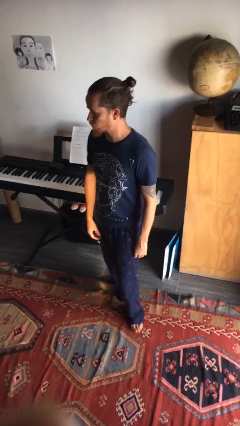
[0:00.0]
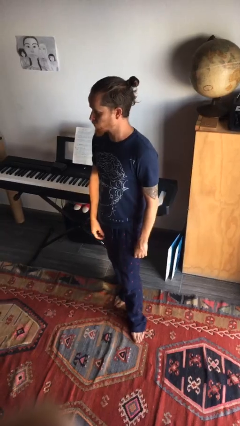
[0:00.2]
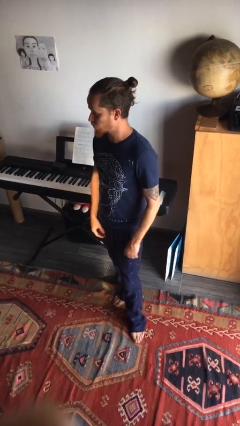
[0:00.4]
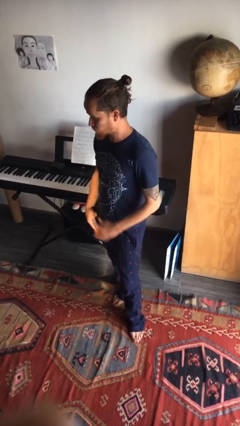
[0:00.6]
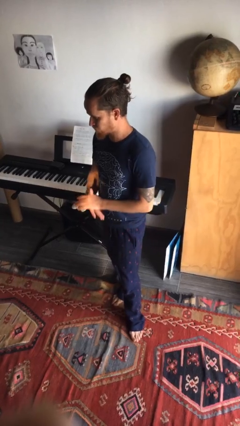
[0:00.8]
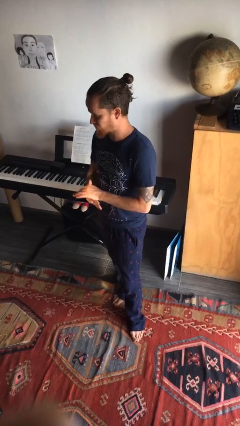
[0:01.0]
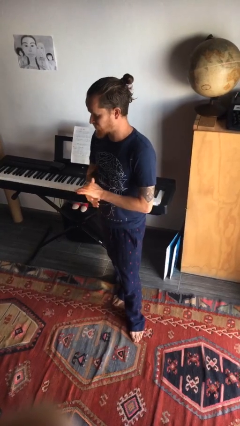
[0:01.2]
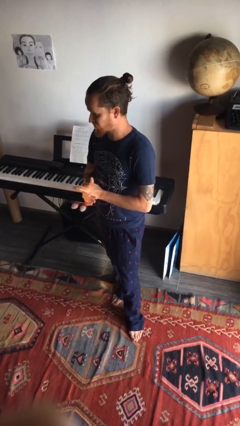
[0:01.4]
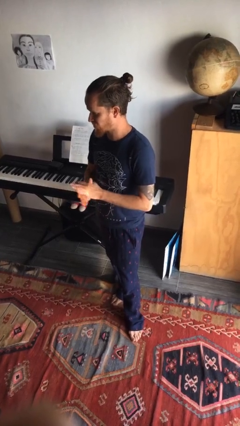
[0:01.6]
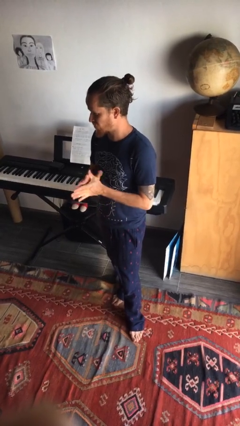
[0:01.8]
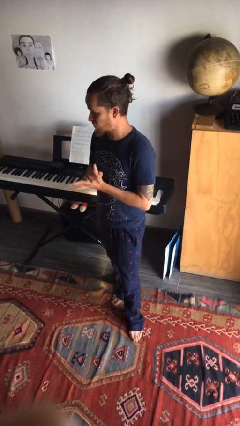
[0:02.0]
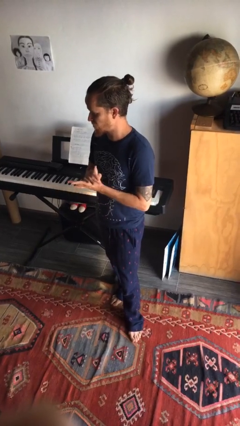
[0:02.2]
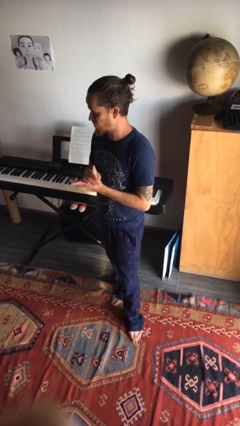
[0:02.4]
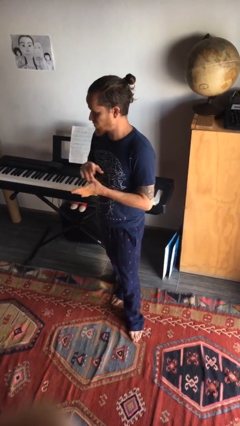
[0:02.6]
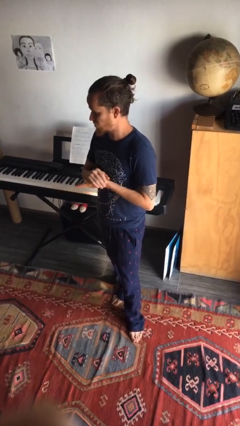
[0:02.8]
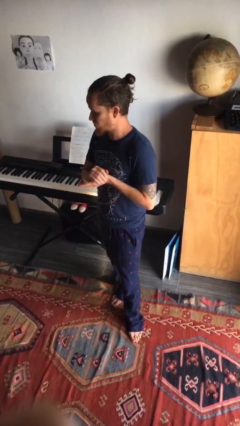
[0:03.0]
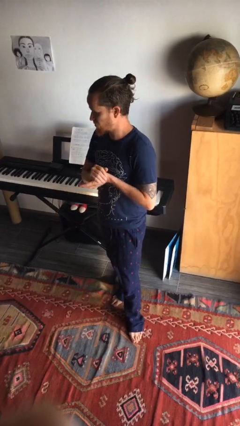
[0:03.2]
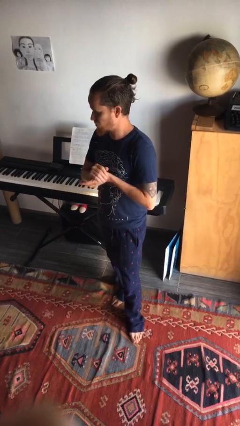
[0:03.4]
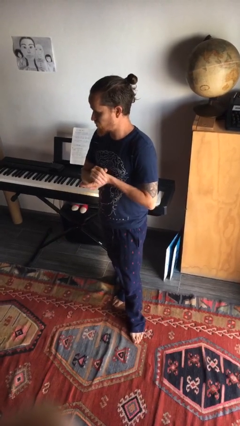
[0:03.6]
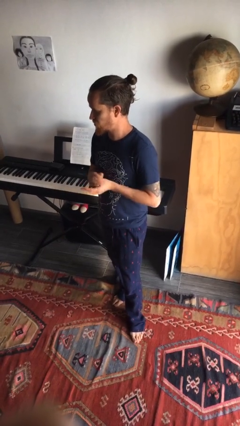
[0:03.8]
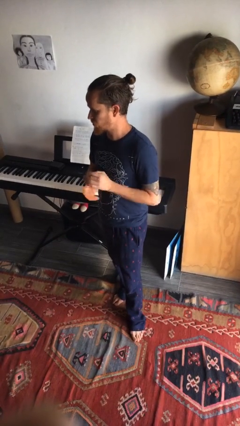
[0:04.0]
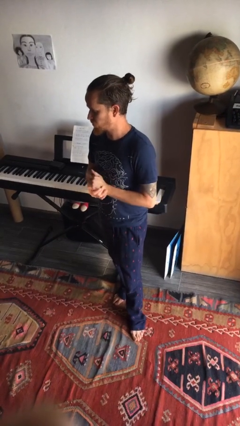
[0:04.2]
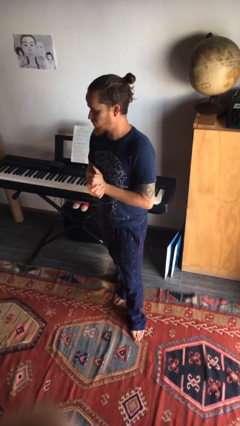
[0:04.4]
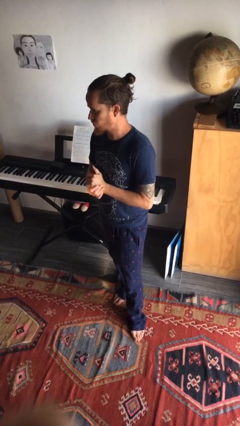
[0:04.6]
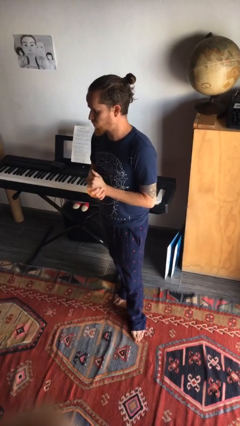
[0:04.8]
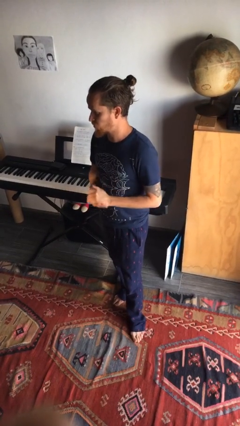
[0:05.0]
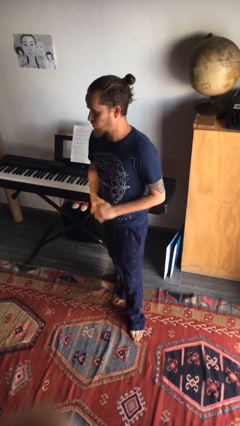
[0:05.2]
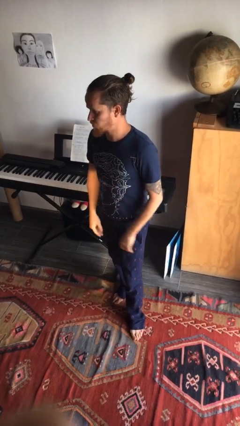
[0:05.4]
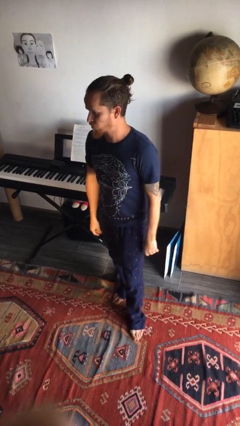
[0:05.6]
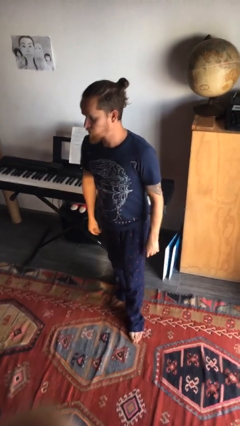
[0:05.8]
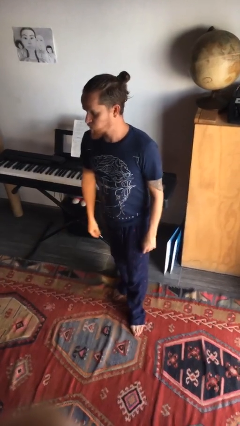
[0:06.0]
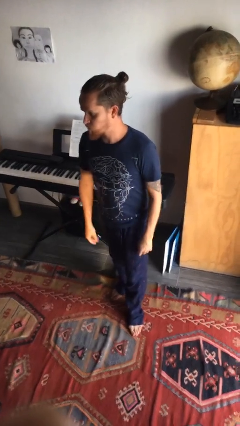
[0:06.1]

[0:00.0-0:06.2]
person cracks knuckles

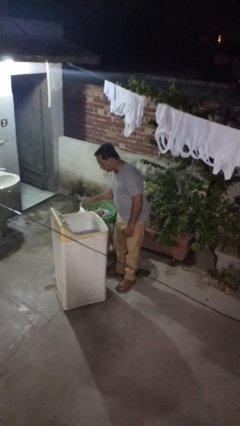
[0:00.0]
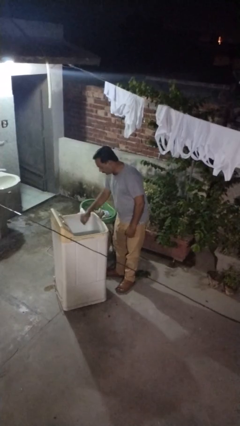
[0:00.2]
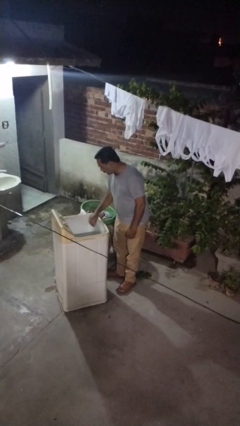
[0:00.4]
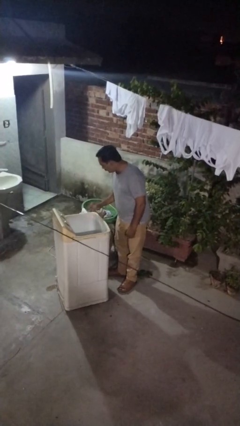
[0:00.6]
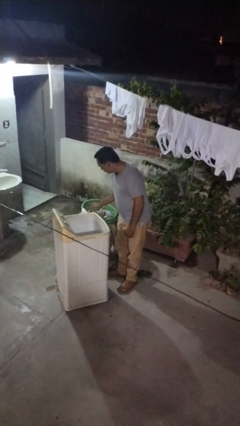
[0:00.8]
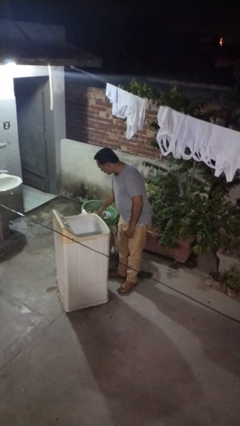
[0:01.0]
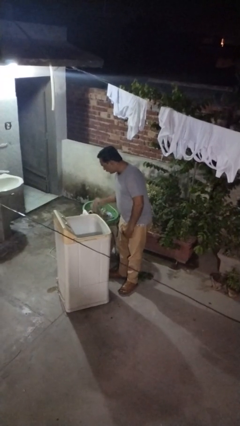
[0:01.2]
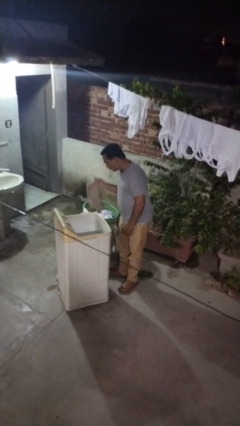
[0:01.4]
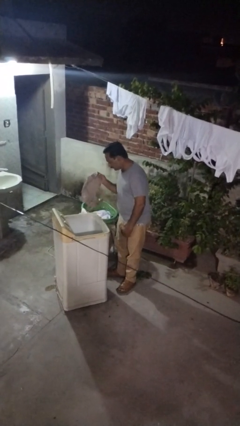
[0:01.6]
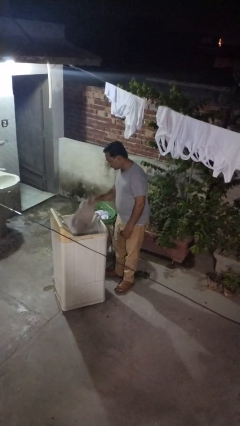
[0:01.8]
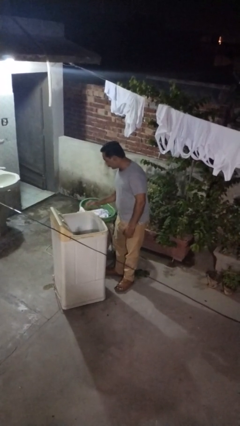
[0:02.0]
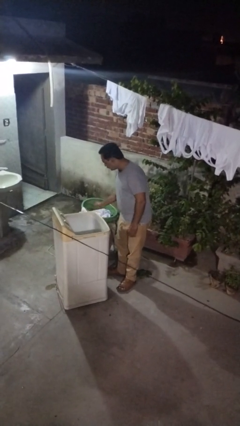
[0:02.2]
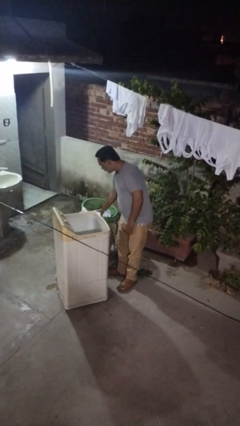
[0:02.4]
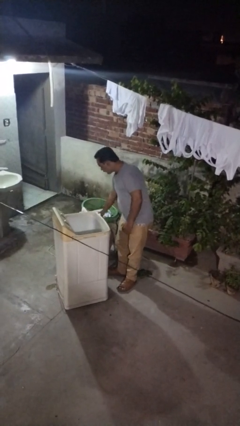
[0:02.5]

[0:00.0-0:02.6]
person unloads clotheswasher

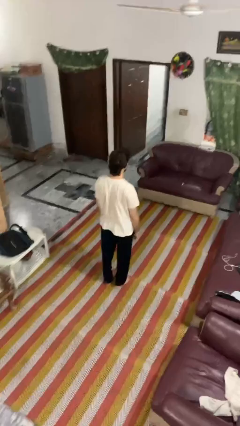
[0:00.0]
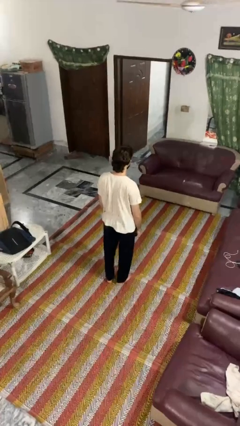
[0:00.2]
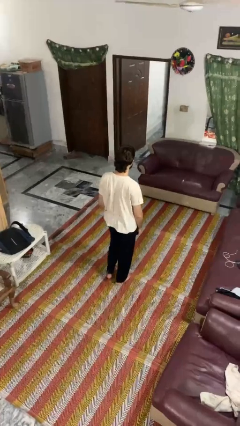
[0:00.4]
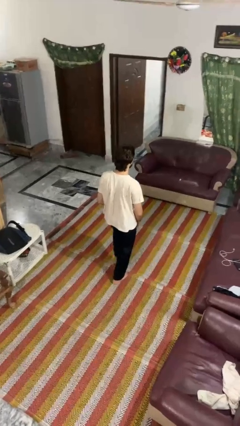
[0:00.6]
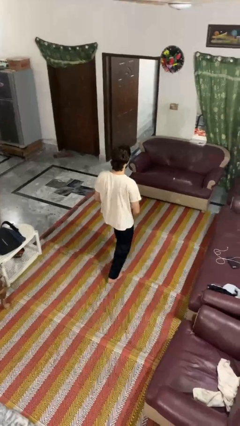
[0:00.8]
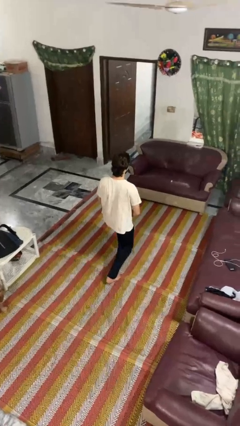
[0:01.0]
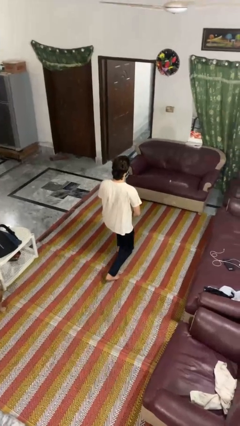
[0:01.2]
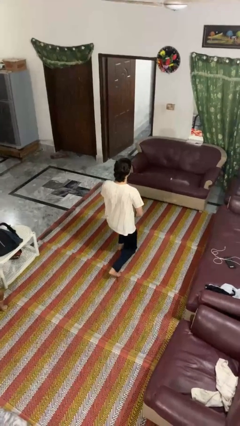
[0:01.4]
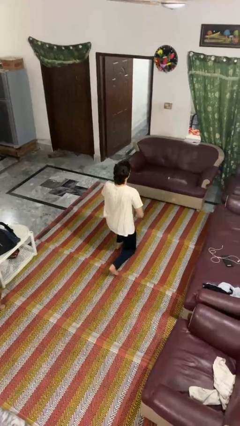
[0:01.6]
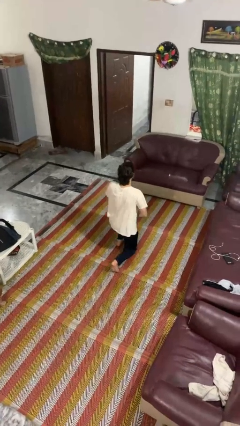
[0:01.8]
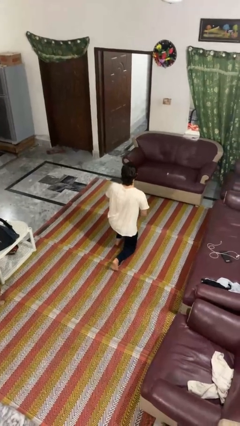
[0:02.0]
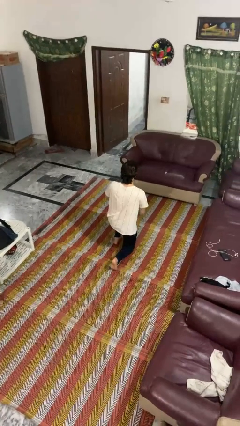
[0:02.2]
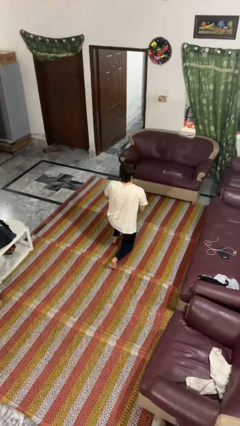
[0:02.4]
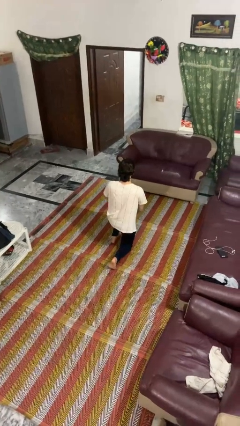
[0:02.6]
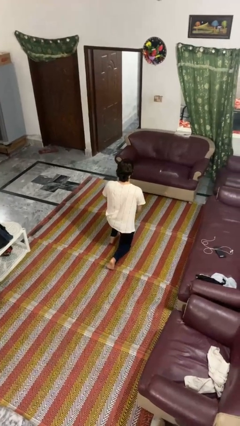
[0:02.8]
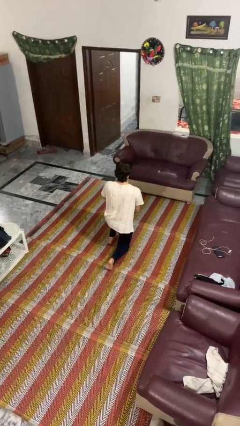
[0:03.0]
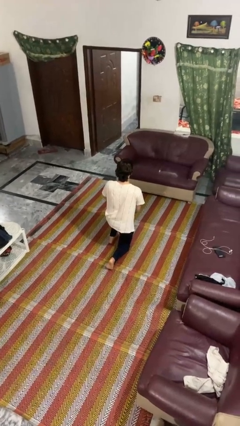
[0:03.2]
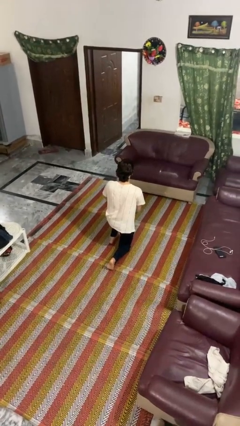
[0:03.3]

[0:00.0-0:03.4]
person kneels

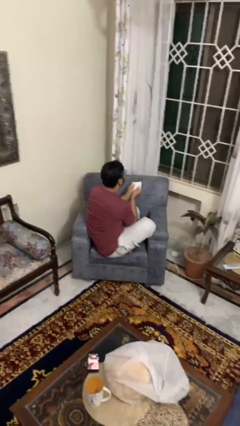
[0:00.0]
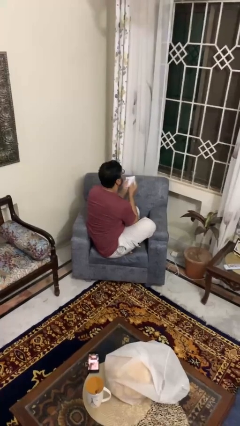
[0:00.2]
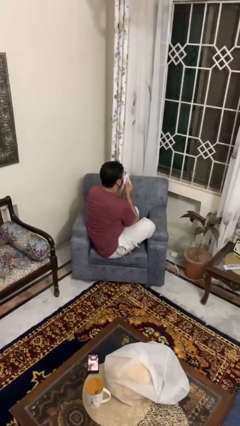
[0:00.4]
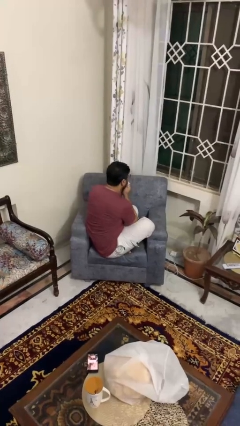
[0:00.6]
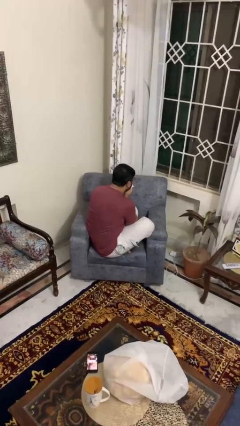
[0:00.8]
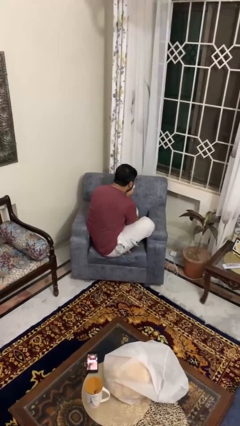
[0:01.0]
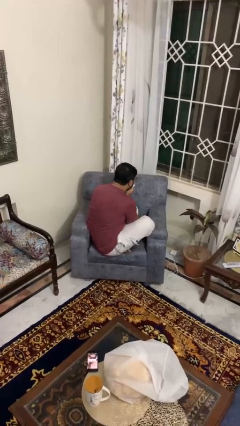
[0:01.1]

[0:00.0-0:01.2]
person blows nose

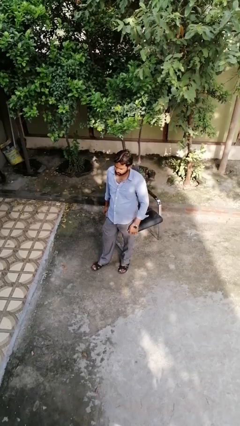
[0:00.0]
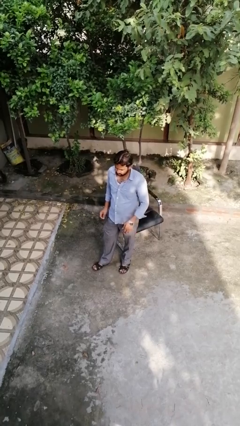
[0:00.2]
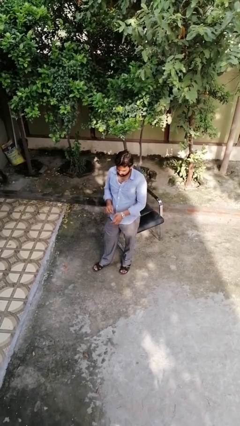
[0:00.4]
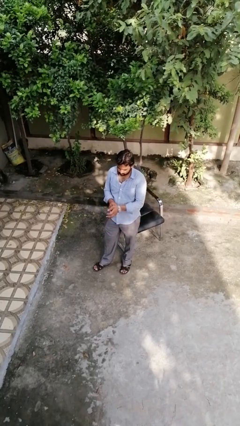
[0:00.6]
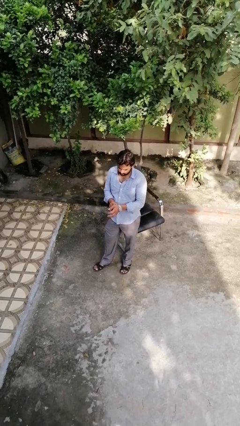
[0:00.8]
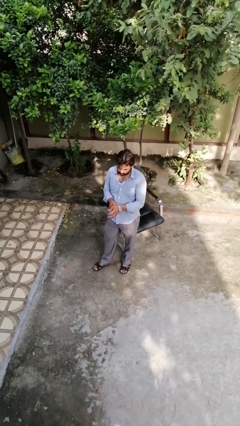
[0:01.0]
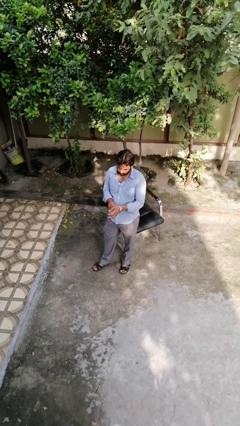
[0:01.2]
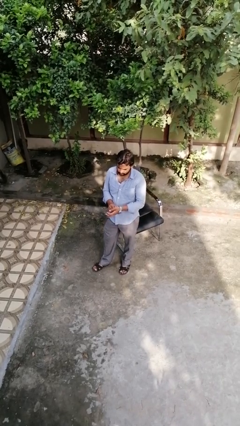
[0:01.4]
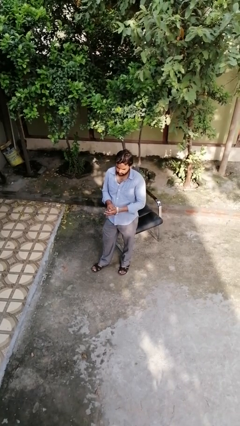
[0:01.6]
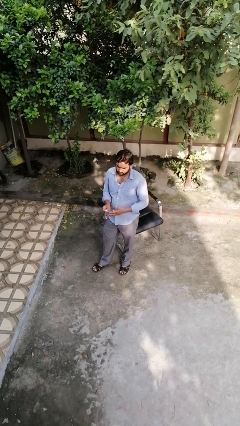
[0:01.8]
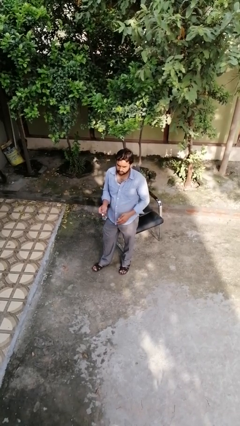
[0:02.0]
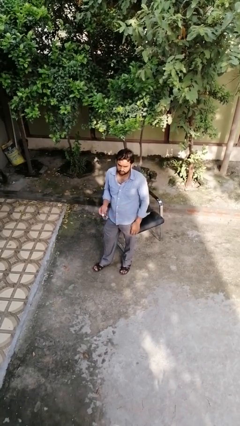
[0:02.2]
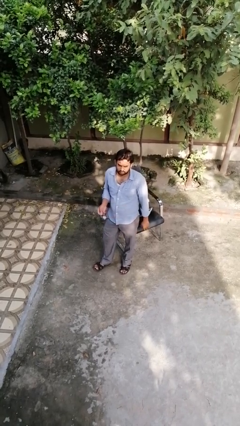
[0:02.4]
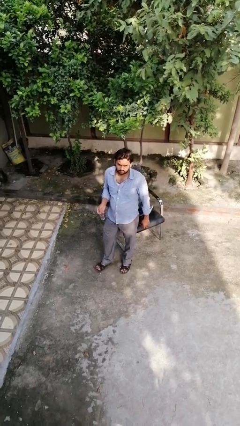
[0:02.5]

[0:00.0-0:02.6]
person takes off wristwatch

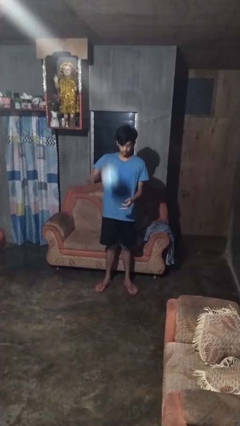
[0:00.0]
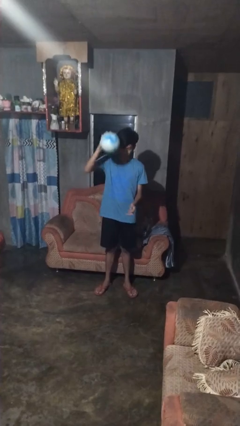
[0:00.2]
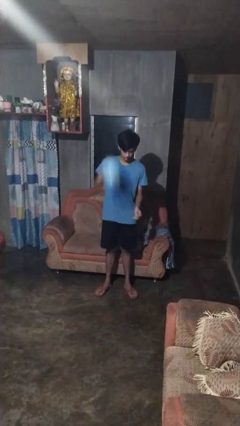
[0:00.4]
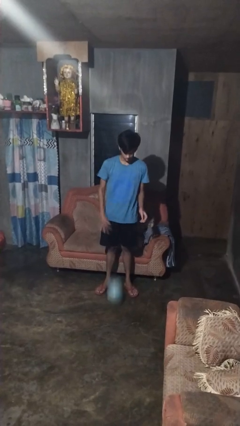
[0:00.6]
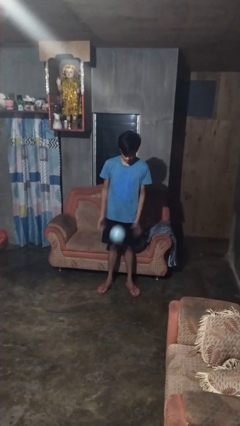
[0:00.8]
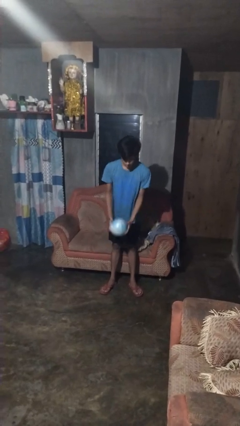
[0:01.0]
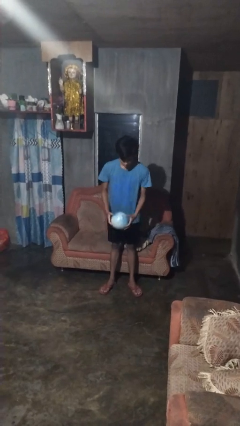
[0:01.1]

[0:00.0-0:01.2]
person bounces ball on floor

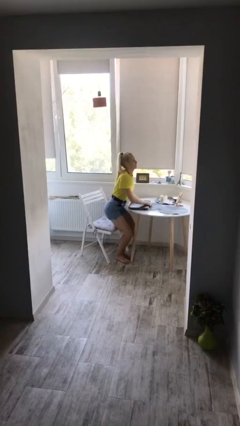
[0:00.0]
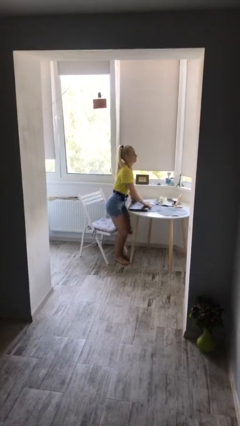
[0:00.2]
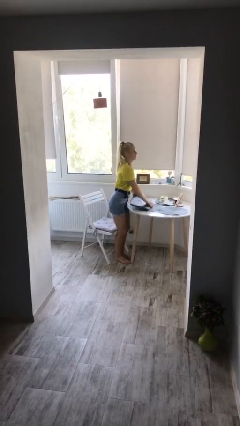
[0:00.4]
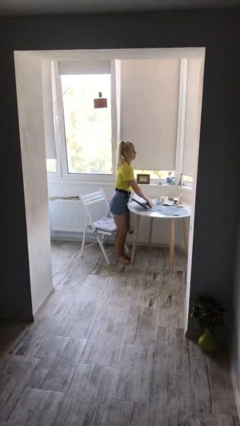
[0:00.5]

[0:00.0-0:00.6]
person stands up
